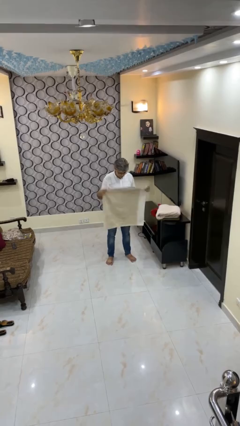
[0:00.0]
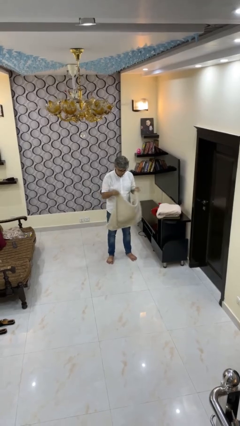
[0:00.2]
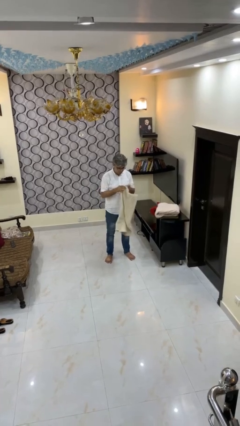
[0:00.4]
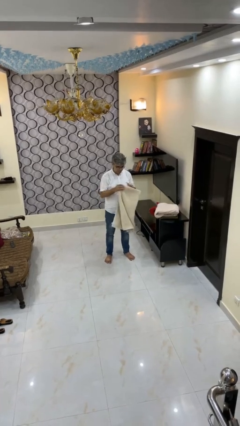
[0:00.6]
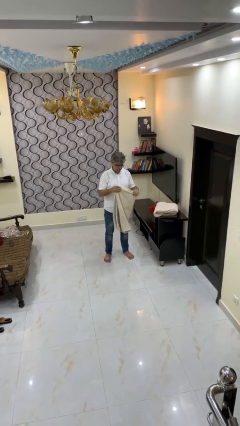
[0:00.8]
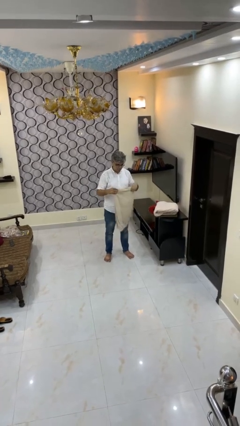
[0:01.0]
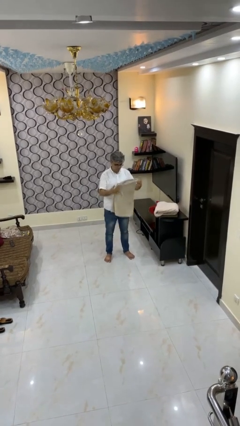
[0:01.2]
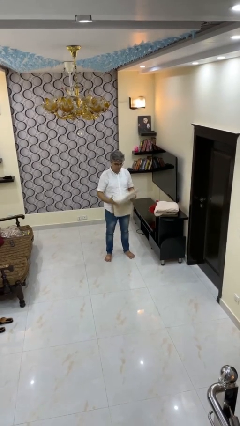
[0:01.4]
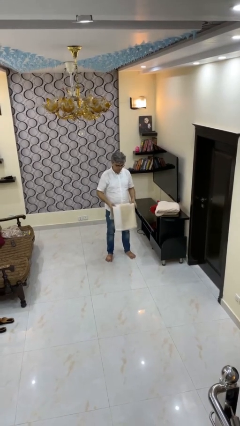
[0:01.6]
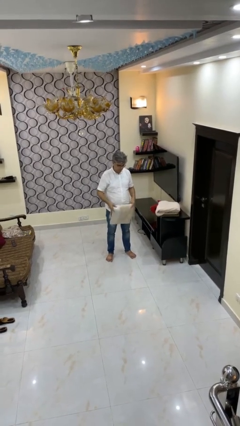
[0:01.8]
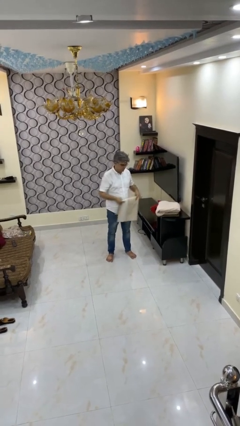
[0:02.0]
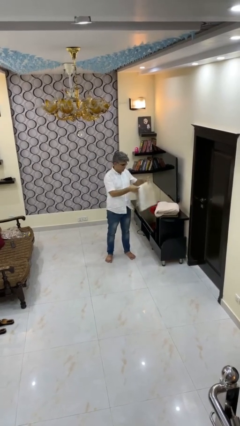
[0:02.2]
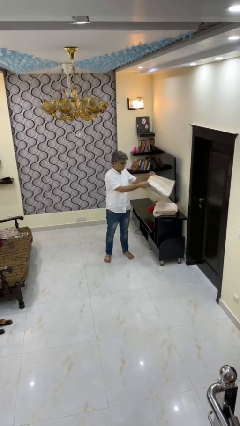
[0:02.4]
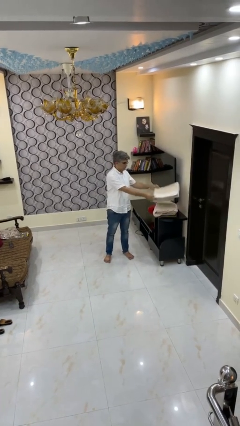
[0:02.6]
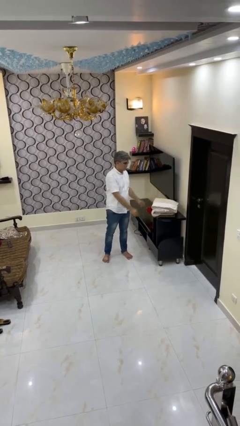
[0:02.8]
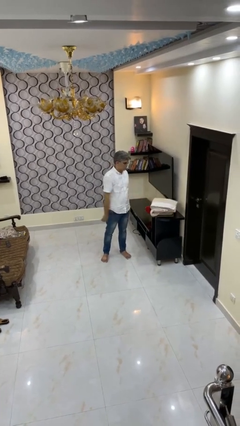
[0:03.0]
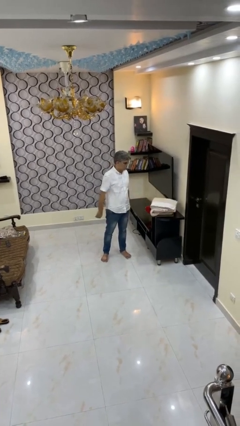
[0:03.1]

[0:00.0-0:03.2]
person folds towel

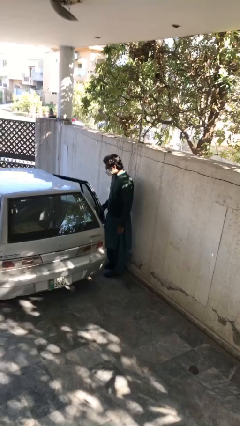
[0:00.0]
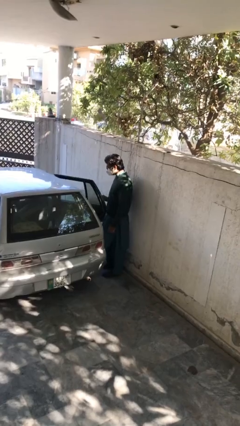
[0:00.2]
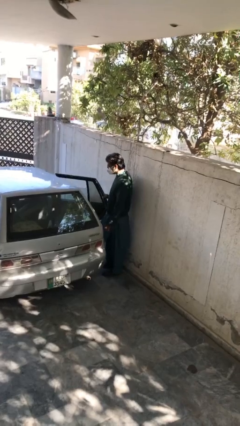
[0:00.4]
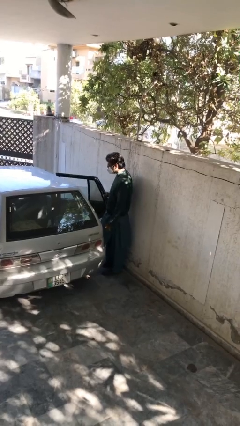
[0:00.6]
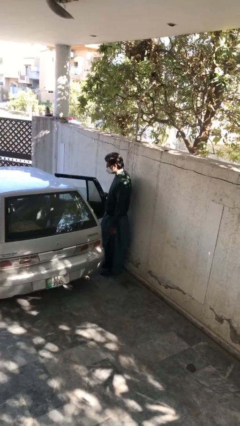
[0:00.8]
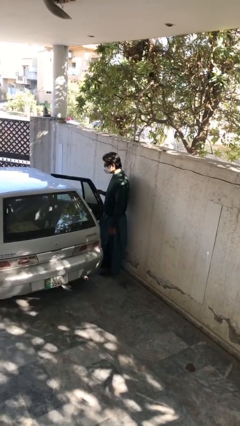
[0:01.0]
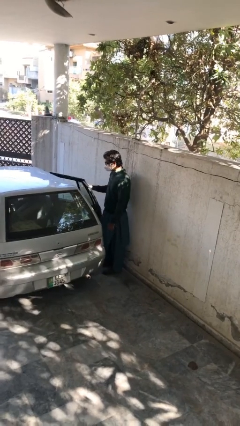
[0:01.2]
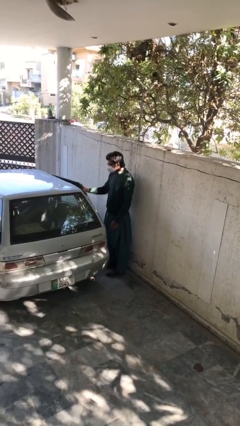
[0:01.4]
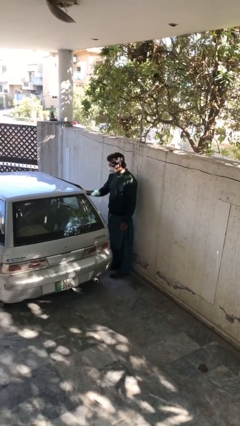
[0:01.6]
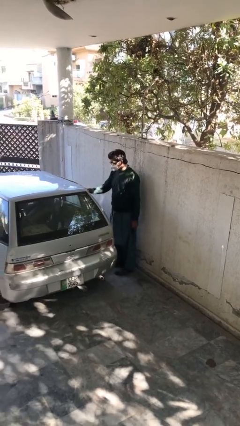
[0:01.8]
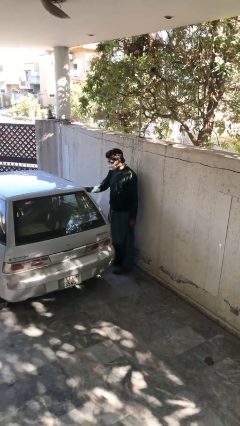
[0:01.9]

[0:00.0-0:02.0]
person closes car door

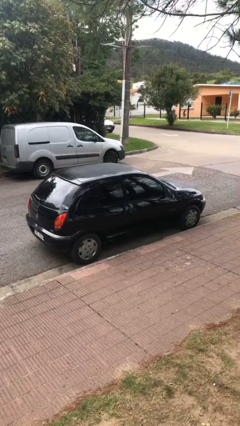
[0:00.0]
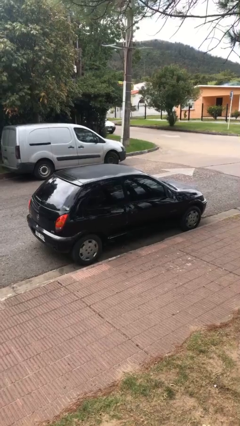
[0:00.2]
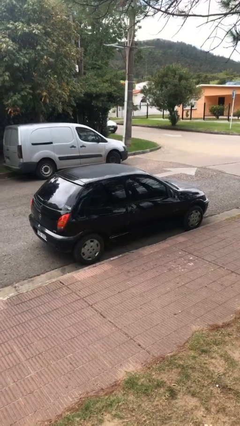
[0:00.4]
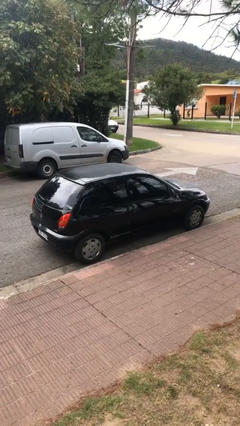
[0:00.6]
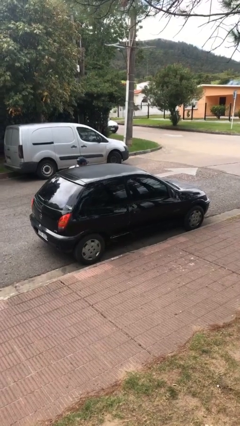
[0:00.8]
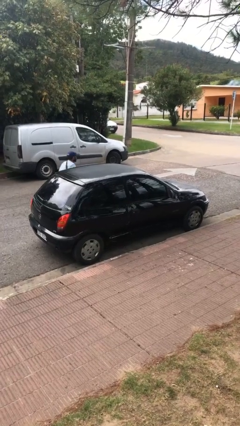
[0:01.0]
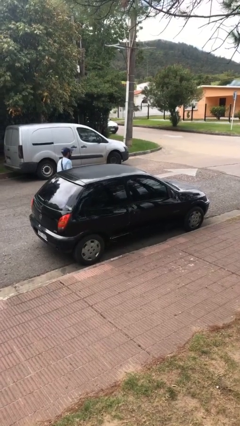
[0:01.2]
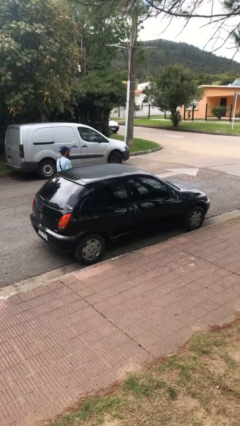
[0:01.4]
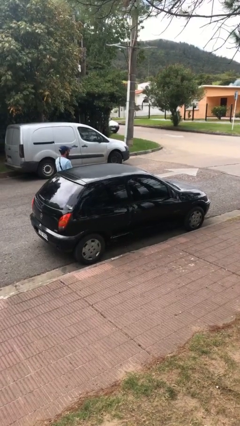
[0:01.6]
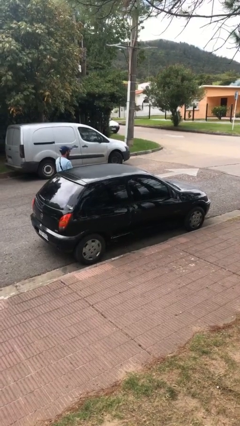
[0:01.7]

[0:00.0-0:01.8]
car drops off person

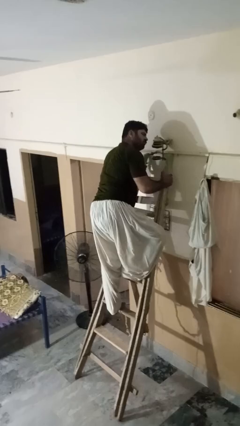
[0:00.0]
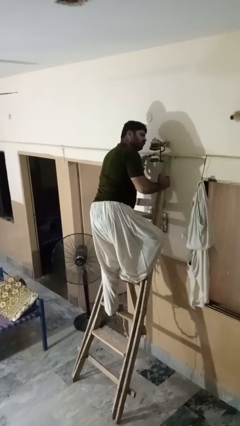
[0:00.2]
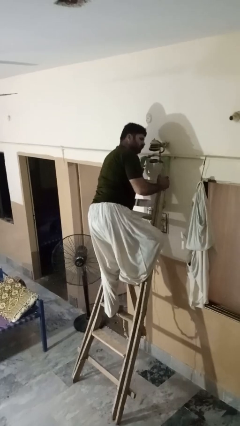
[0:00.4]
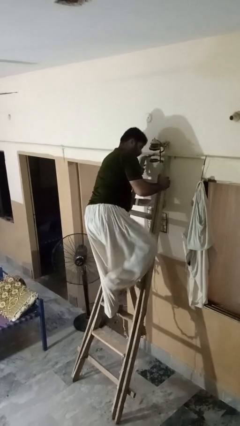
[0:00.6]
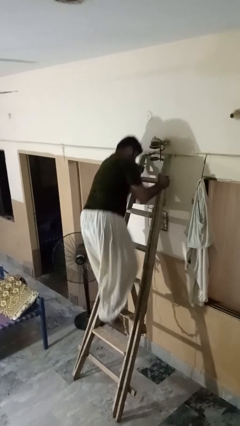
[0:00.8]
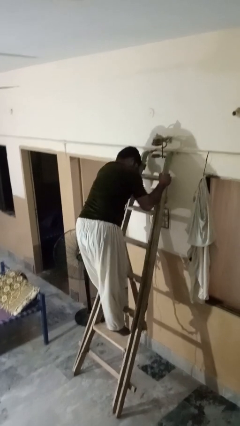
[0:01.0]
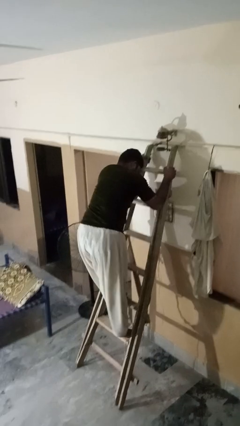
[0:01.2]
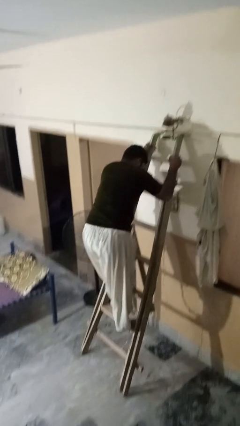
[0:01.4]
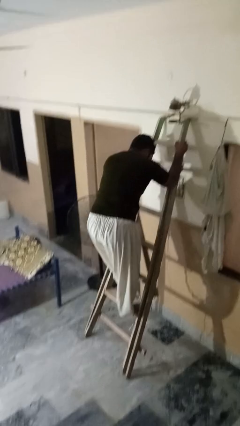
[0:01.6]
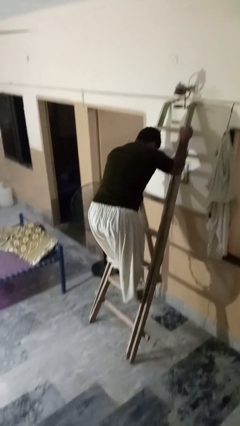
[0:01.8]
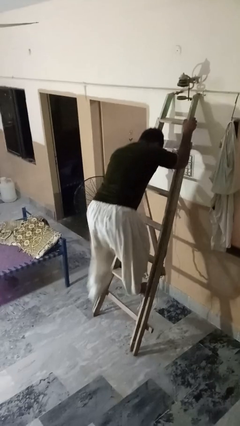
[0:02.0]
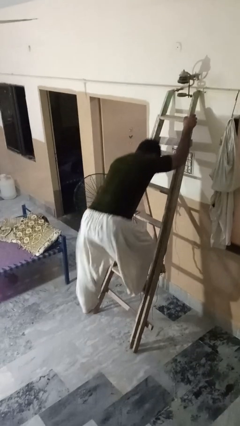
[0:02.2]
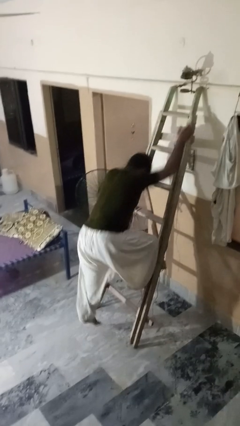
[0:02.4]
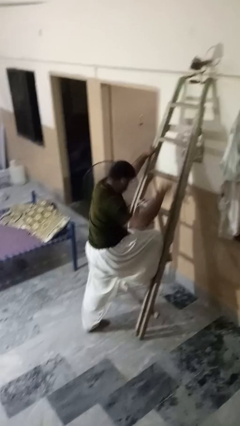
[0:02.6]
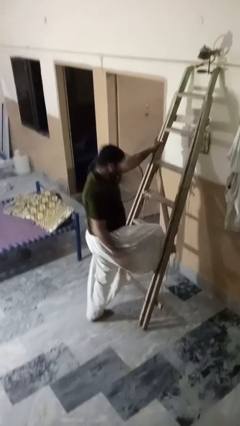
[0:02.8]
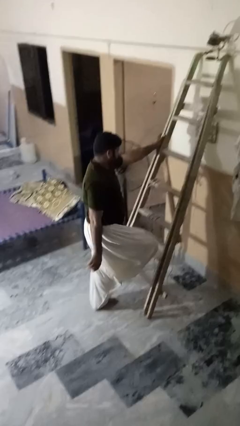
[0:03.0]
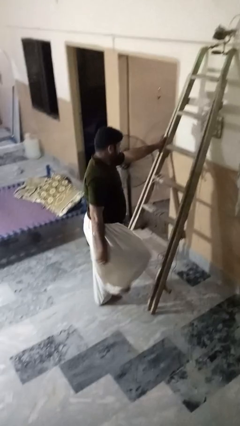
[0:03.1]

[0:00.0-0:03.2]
person climbs down ladder

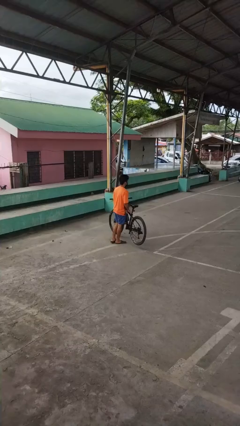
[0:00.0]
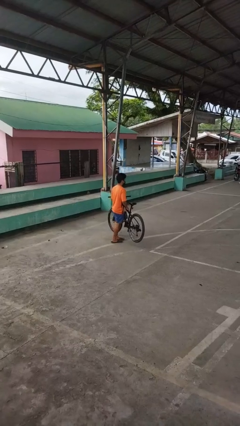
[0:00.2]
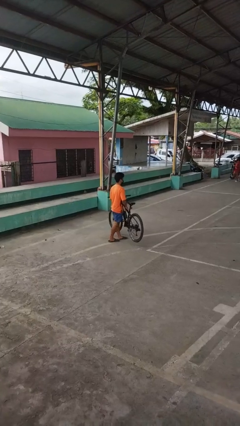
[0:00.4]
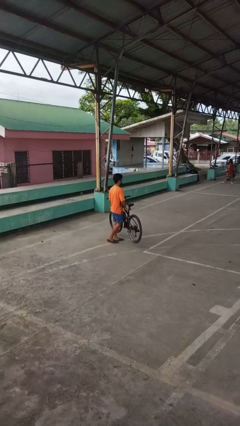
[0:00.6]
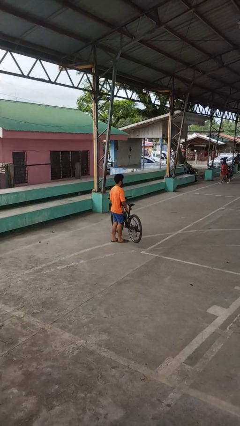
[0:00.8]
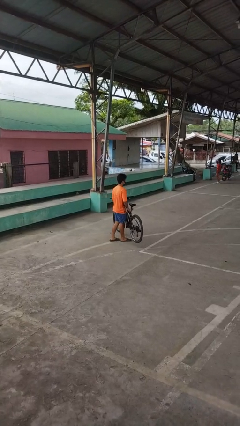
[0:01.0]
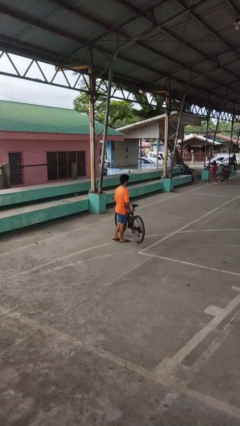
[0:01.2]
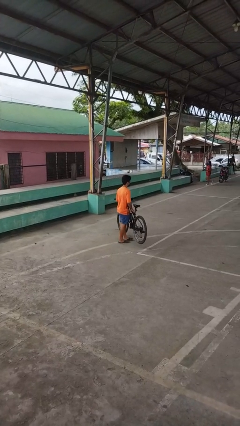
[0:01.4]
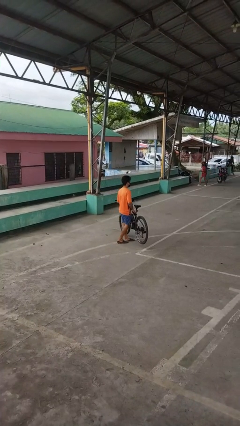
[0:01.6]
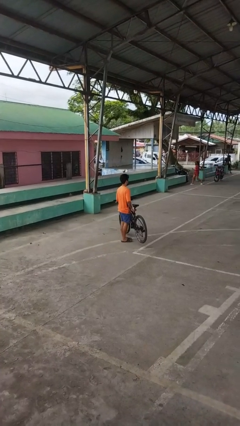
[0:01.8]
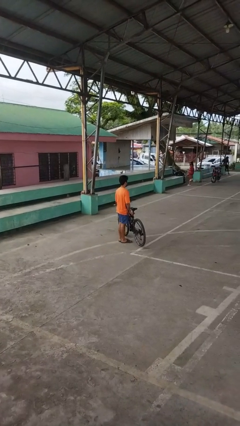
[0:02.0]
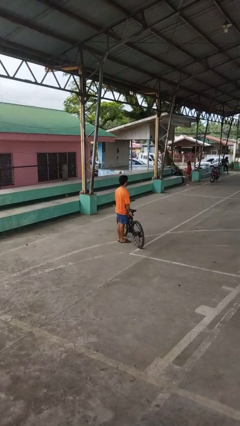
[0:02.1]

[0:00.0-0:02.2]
person carries bicycle

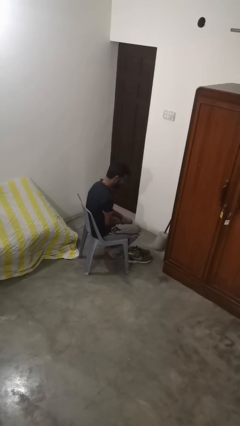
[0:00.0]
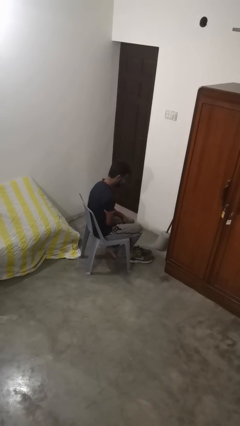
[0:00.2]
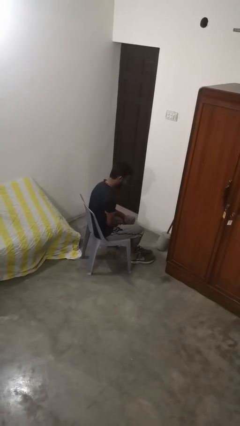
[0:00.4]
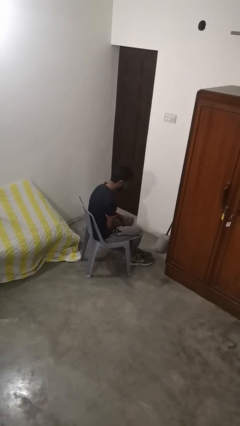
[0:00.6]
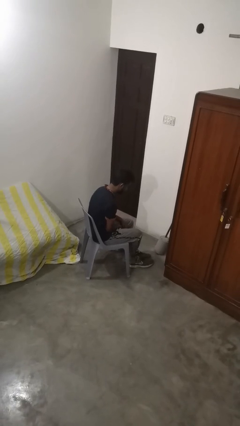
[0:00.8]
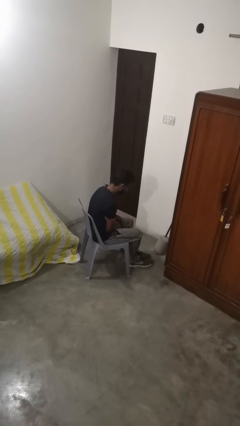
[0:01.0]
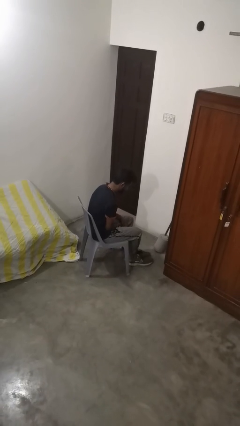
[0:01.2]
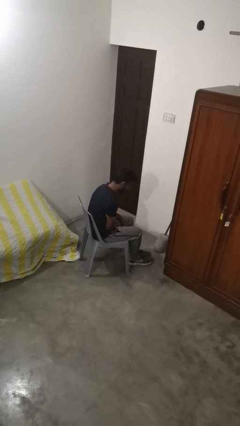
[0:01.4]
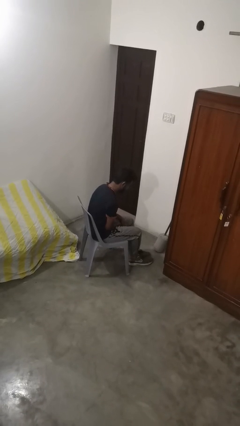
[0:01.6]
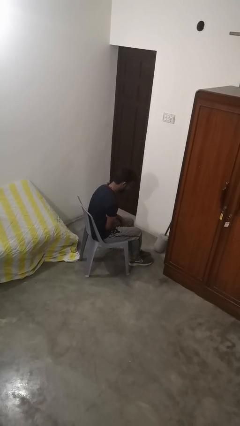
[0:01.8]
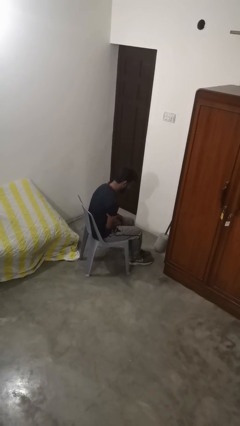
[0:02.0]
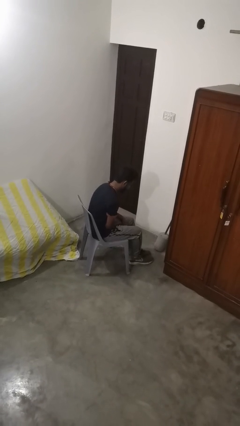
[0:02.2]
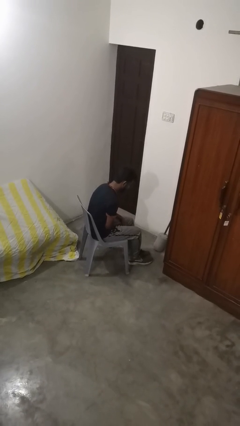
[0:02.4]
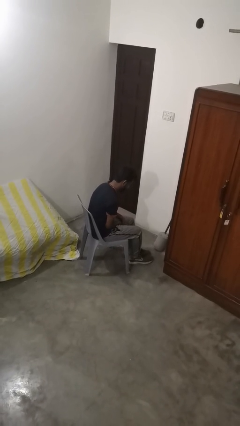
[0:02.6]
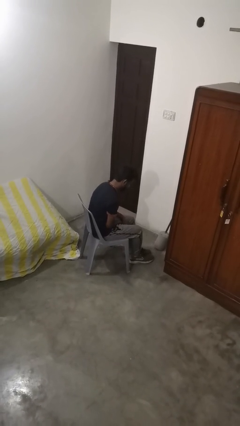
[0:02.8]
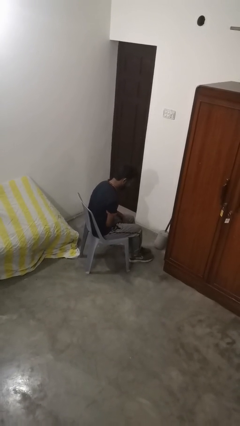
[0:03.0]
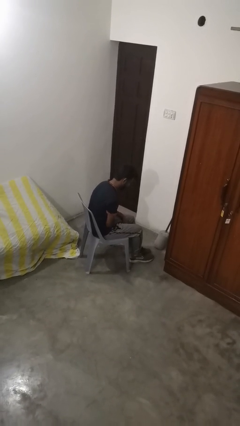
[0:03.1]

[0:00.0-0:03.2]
person puts on shoes

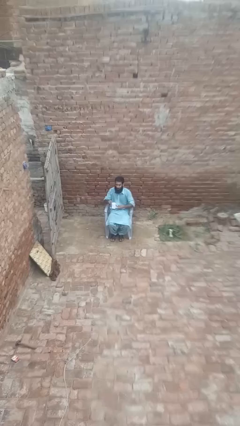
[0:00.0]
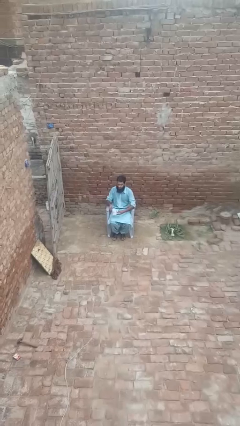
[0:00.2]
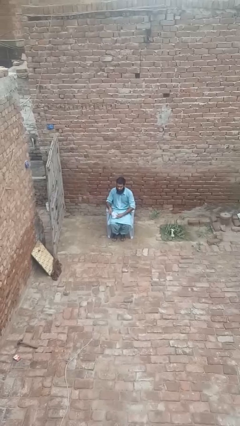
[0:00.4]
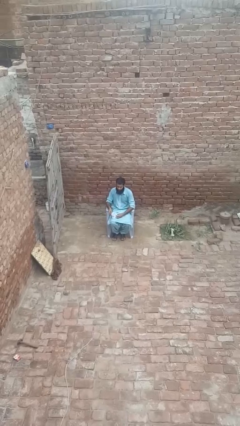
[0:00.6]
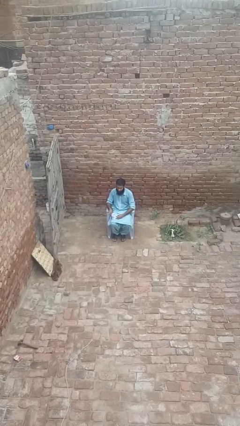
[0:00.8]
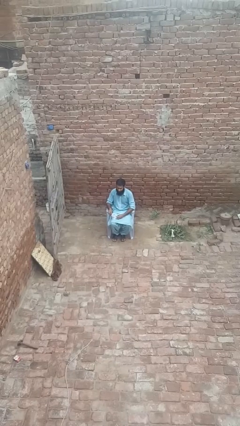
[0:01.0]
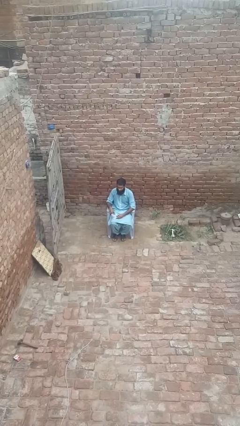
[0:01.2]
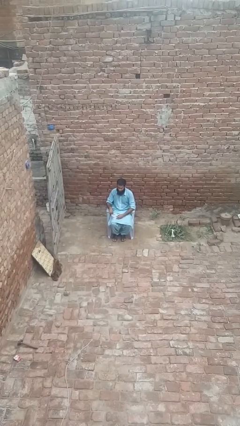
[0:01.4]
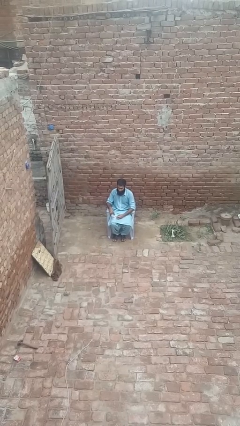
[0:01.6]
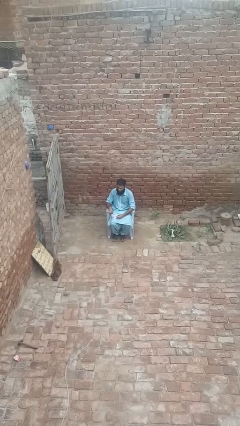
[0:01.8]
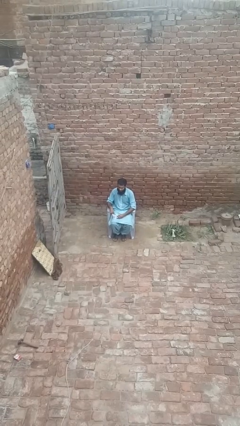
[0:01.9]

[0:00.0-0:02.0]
person stirs mug
